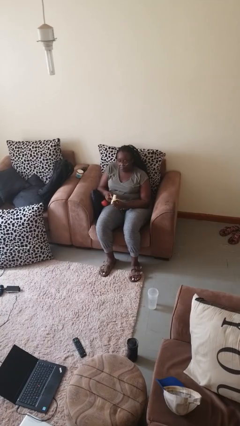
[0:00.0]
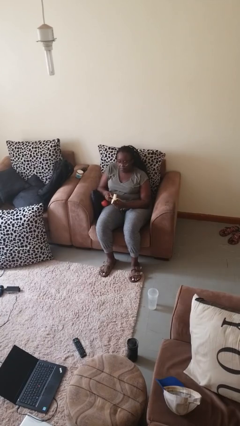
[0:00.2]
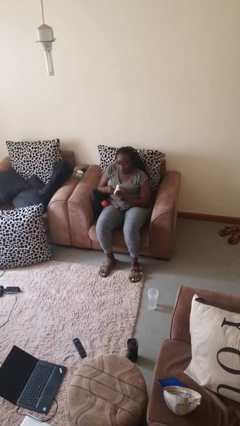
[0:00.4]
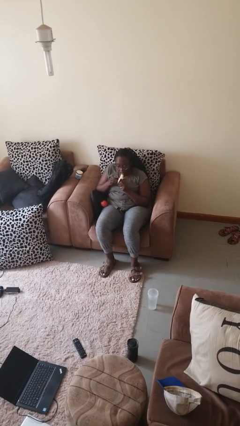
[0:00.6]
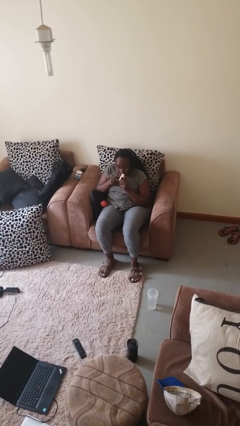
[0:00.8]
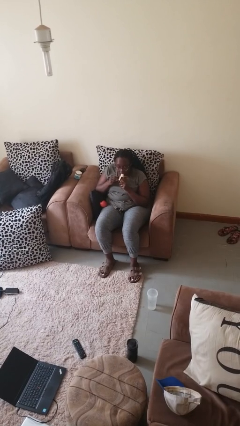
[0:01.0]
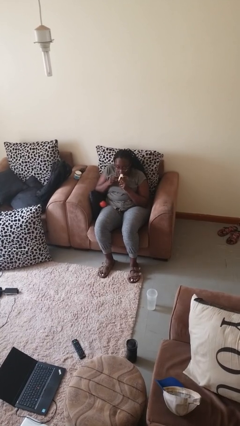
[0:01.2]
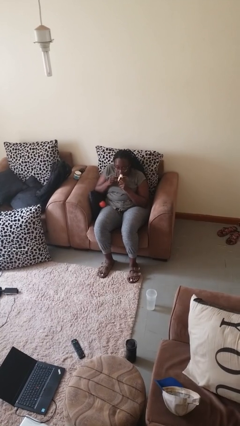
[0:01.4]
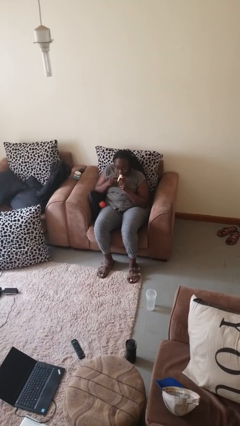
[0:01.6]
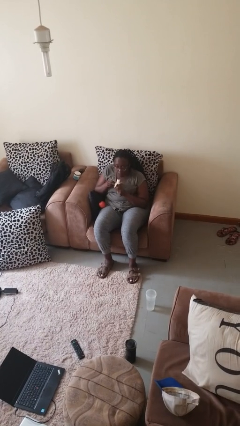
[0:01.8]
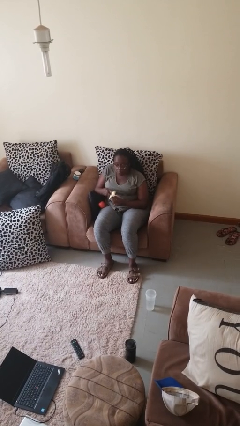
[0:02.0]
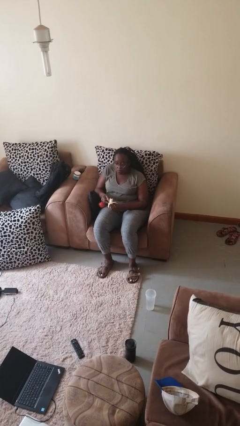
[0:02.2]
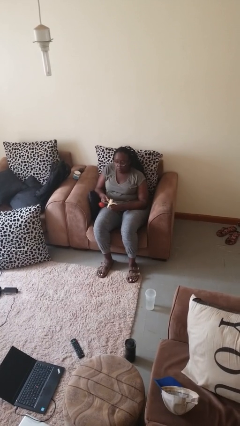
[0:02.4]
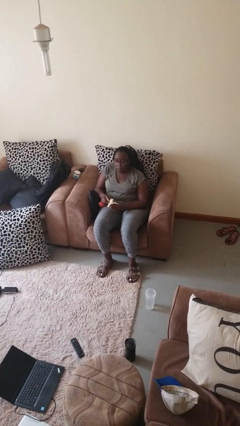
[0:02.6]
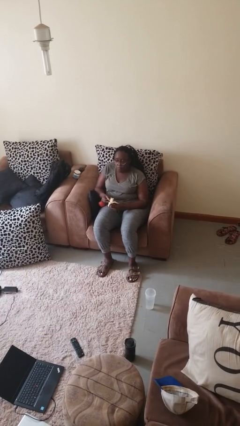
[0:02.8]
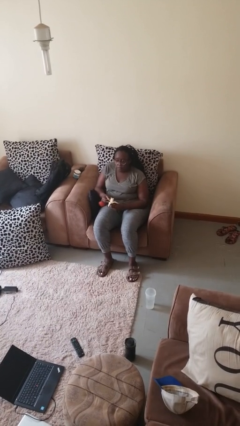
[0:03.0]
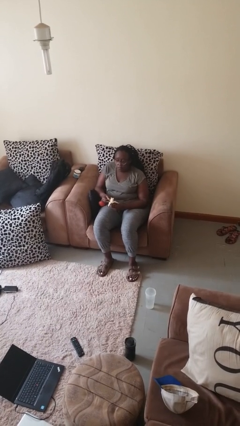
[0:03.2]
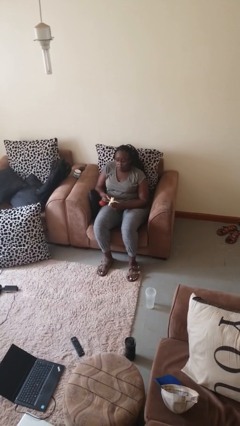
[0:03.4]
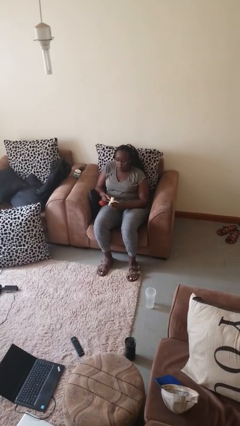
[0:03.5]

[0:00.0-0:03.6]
person eats banana

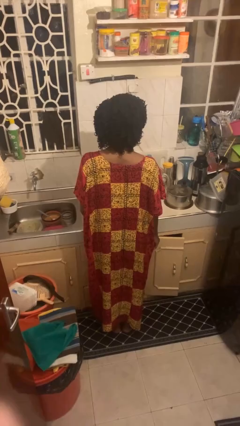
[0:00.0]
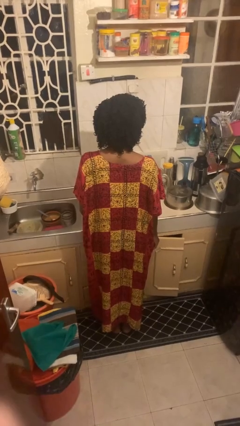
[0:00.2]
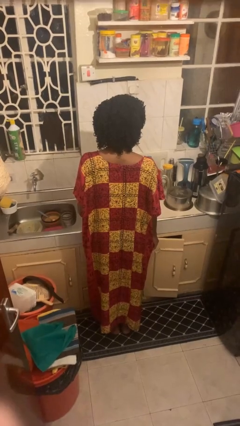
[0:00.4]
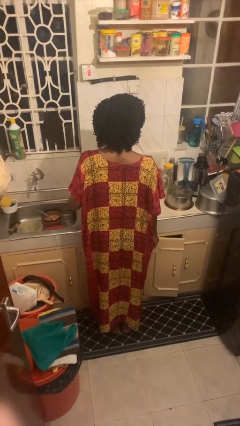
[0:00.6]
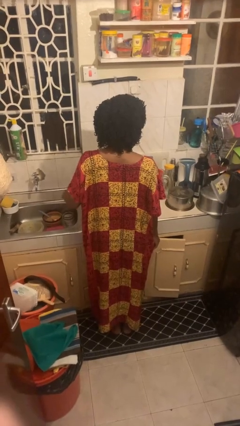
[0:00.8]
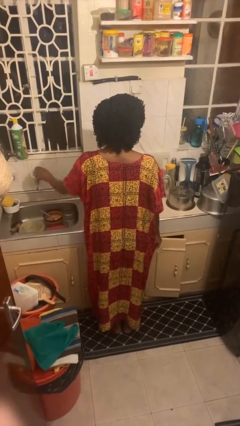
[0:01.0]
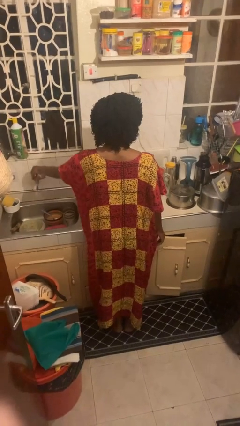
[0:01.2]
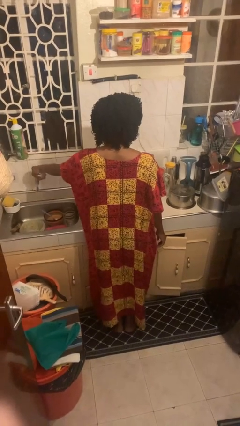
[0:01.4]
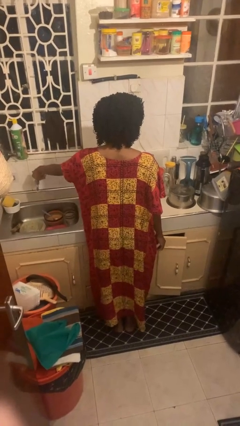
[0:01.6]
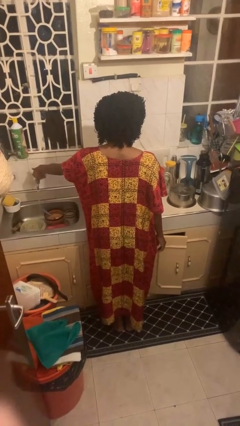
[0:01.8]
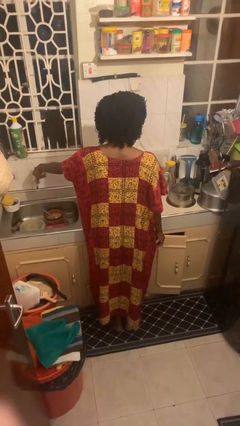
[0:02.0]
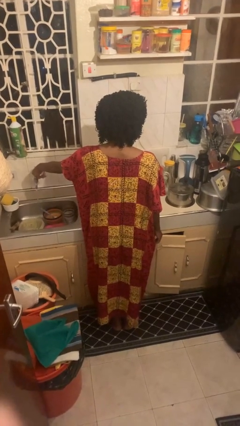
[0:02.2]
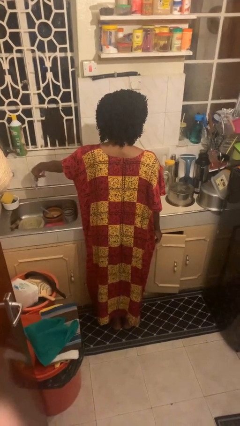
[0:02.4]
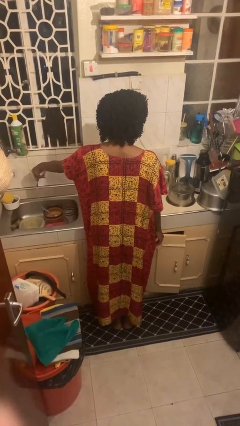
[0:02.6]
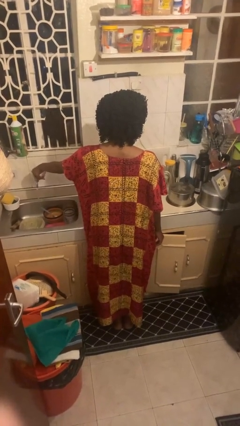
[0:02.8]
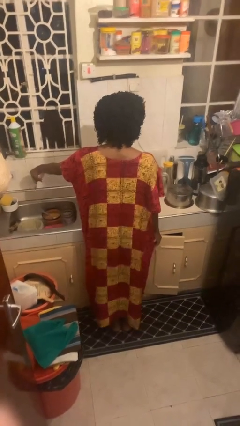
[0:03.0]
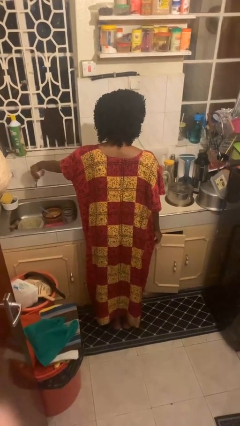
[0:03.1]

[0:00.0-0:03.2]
person turns on faucet

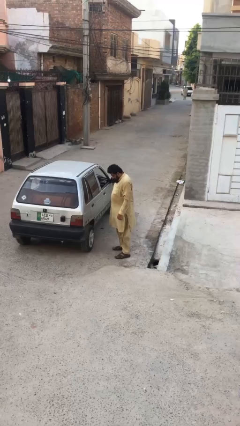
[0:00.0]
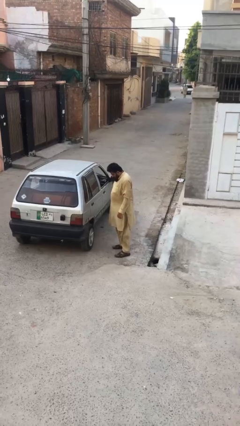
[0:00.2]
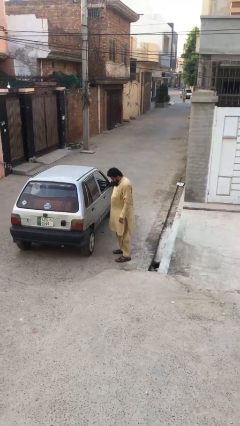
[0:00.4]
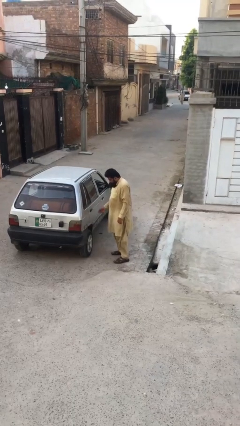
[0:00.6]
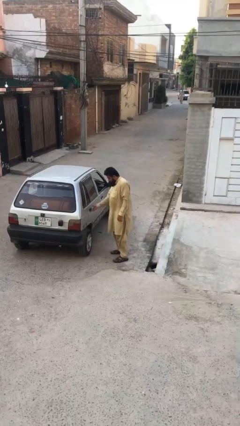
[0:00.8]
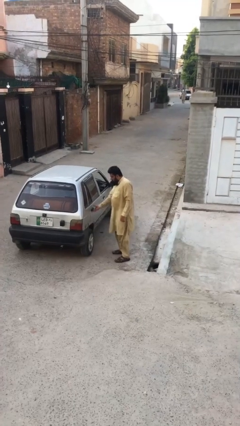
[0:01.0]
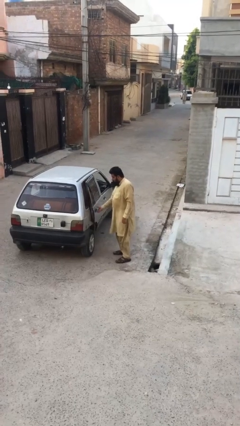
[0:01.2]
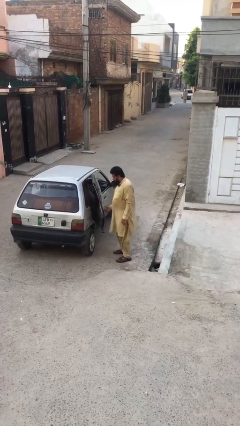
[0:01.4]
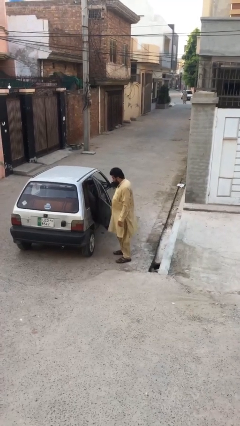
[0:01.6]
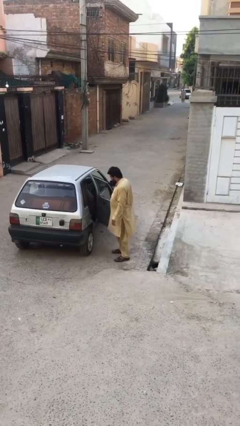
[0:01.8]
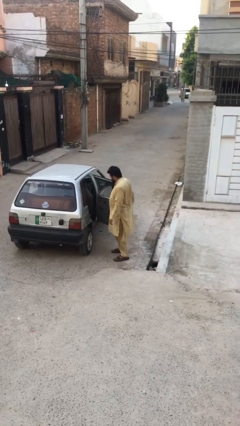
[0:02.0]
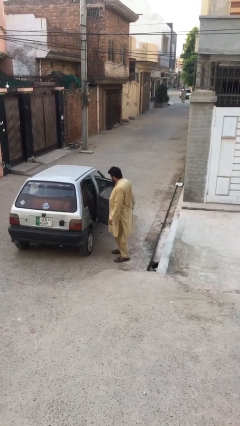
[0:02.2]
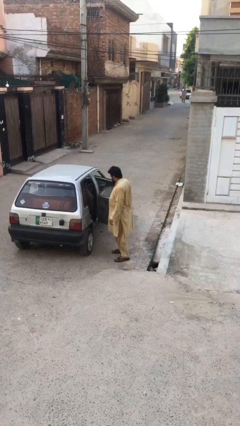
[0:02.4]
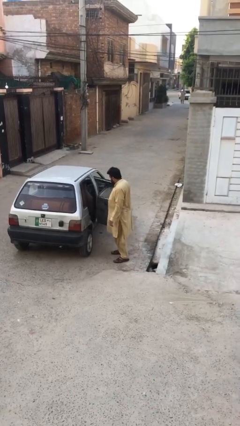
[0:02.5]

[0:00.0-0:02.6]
person opens car door

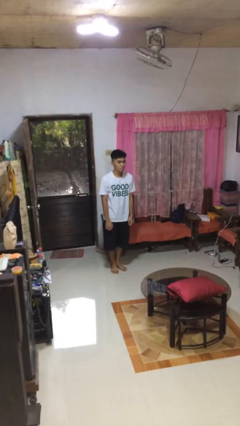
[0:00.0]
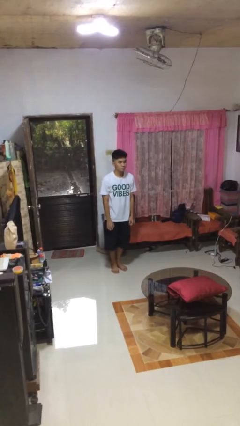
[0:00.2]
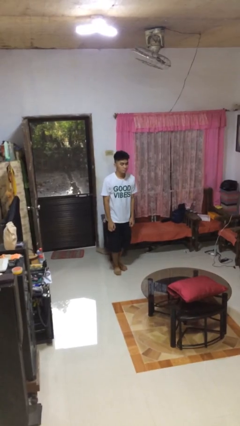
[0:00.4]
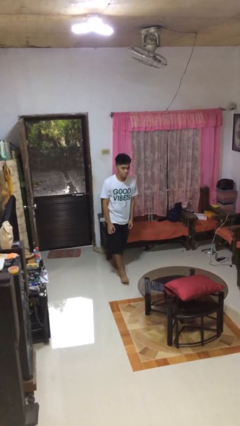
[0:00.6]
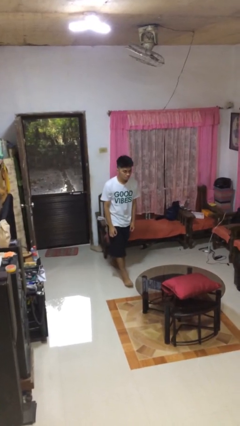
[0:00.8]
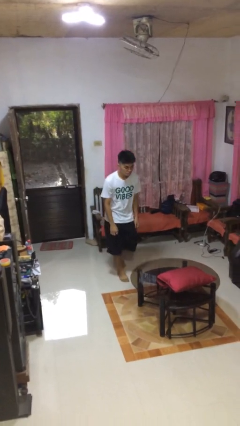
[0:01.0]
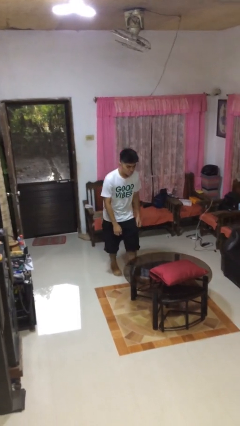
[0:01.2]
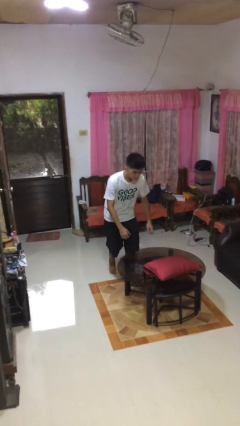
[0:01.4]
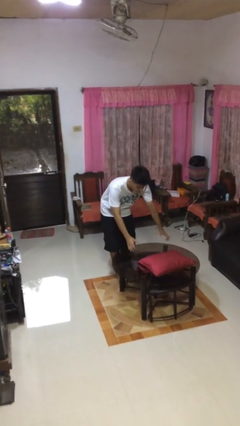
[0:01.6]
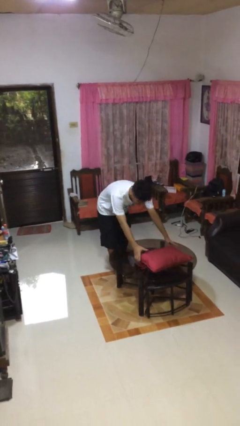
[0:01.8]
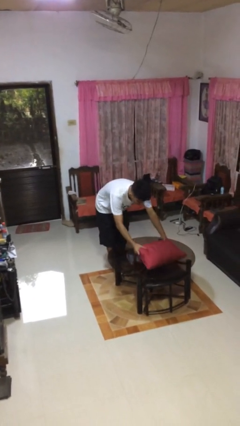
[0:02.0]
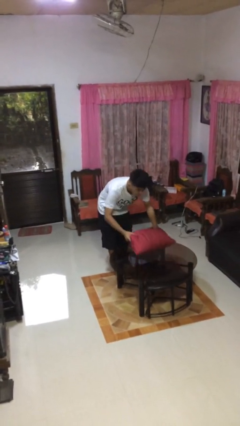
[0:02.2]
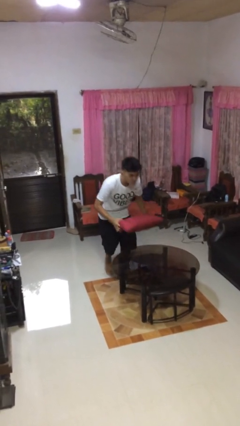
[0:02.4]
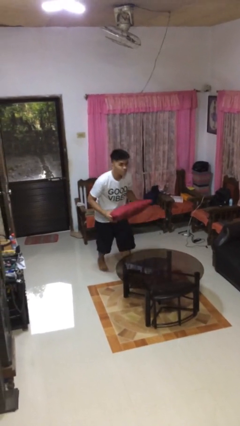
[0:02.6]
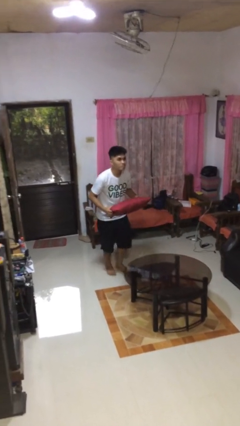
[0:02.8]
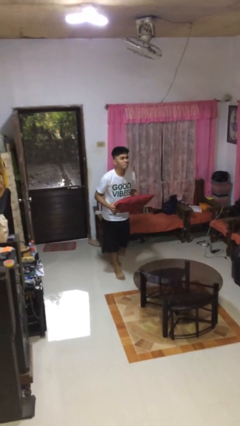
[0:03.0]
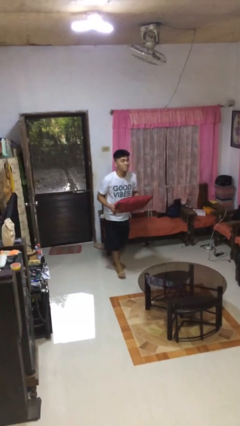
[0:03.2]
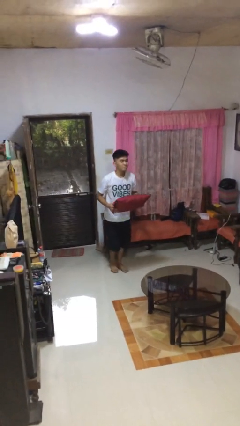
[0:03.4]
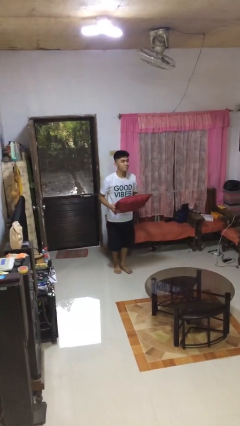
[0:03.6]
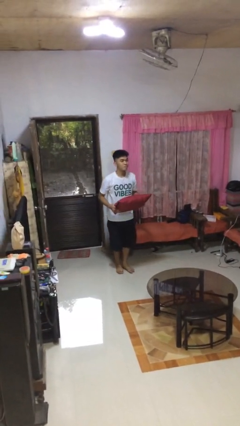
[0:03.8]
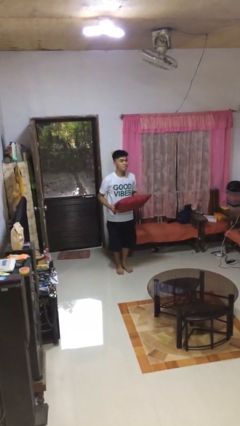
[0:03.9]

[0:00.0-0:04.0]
person picks up object from table

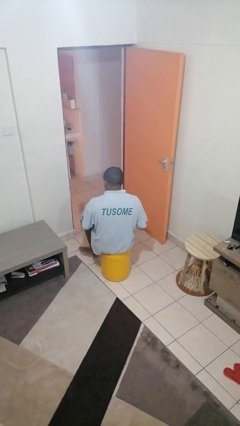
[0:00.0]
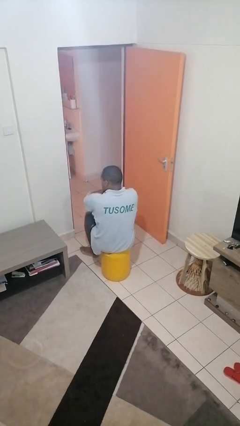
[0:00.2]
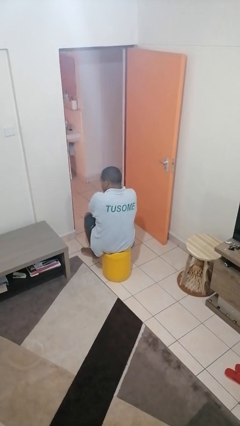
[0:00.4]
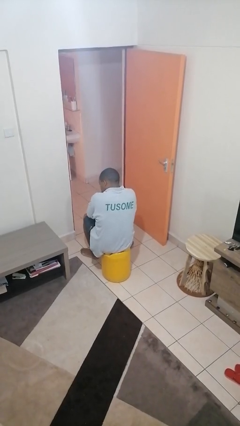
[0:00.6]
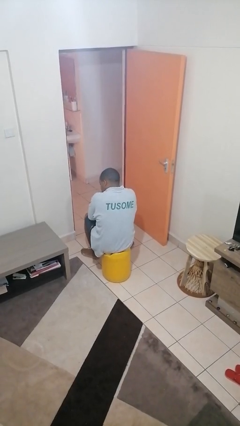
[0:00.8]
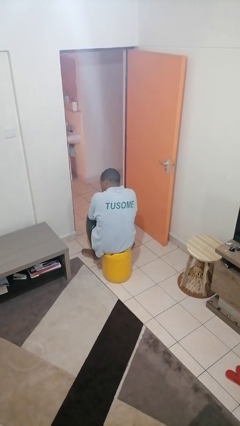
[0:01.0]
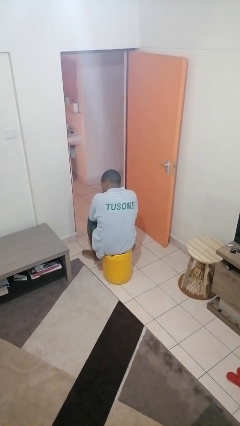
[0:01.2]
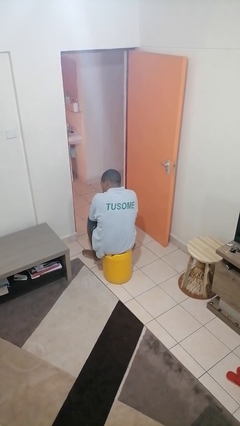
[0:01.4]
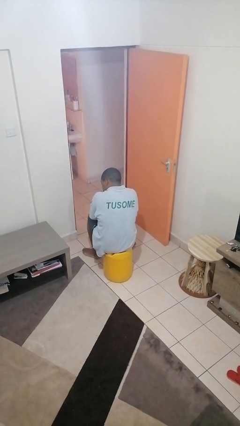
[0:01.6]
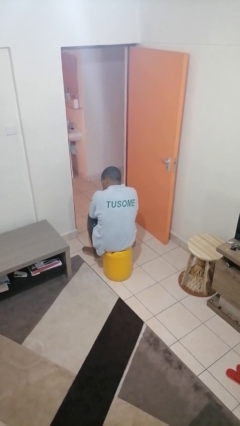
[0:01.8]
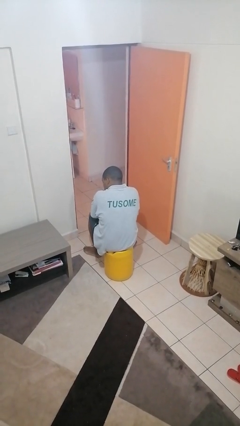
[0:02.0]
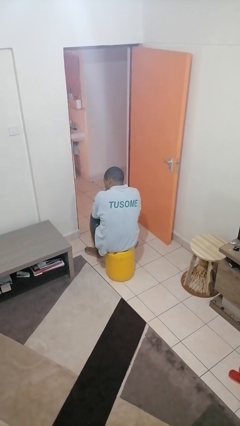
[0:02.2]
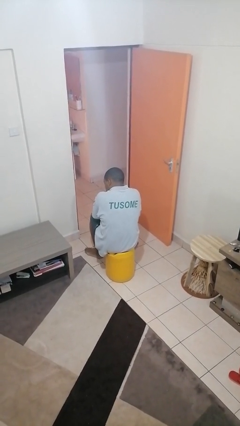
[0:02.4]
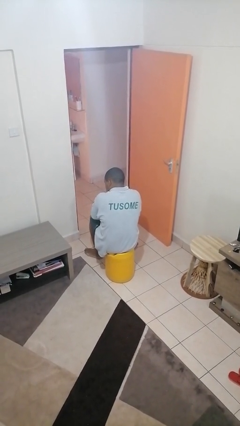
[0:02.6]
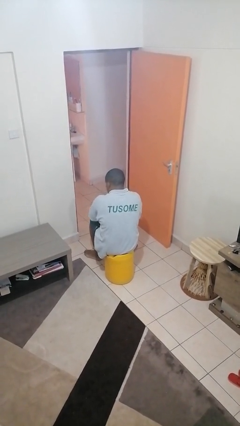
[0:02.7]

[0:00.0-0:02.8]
person crosses arms

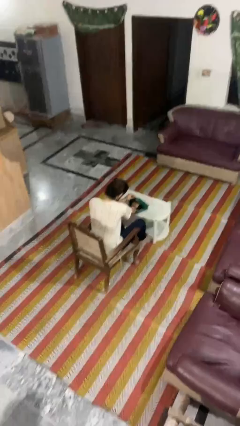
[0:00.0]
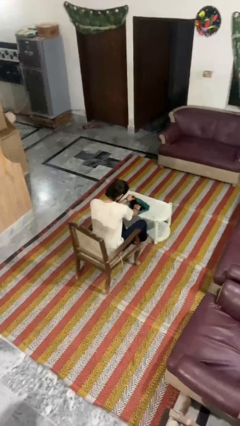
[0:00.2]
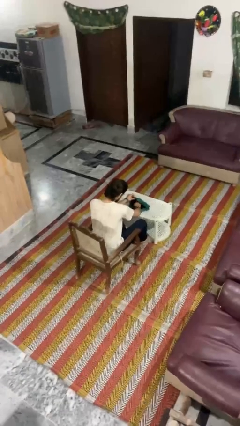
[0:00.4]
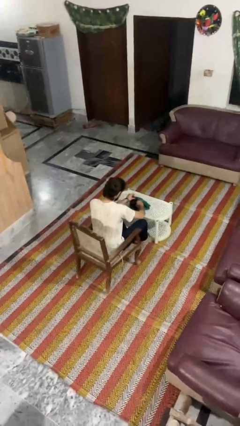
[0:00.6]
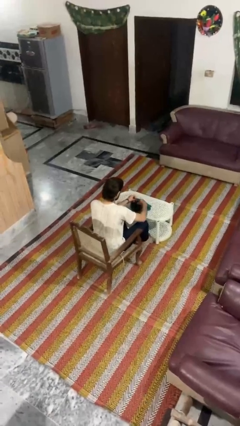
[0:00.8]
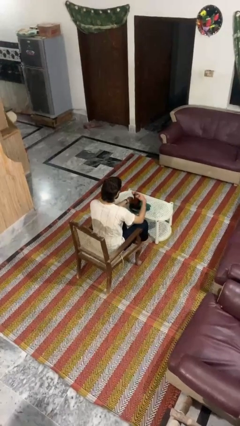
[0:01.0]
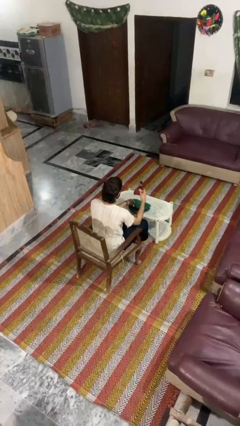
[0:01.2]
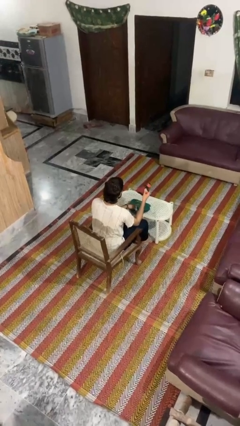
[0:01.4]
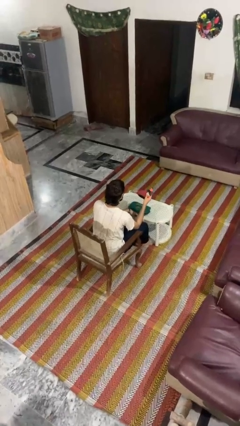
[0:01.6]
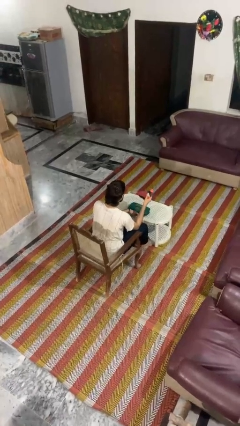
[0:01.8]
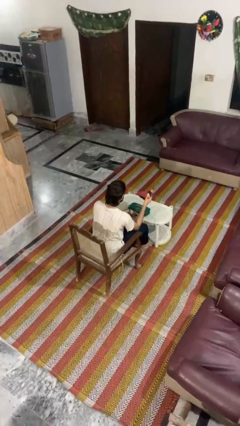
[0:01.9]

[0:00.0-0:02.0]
person takes object from purse
